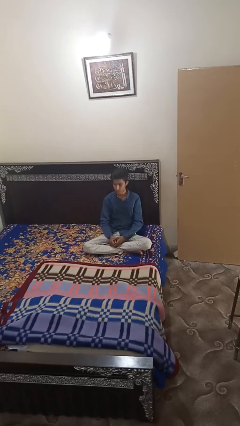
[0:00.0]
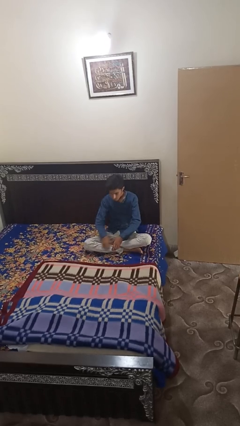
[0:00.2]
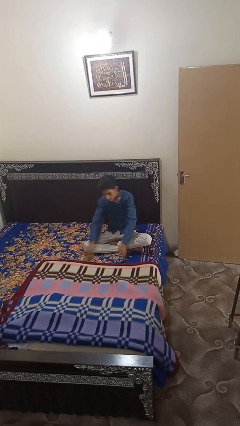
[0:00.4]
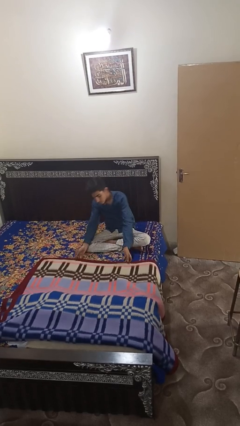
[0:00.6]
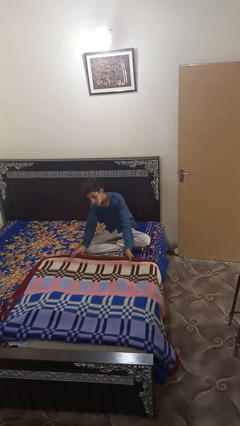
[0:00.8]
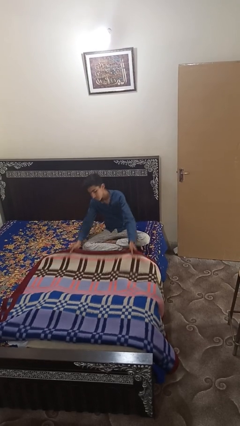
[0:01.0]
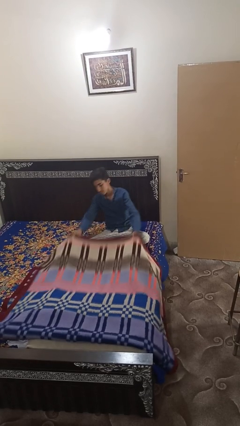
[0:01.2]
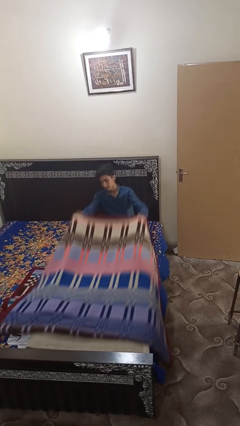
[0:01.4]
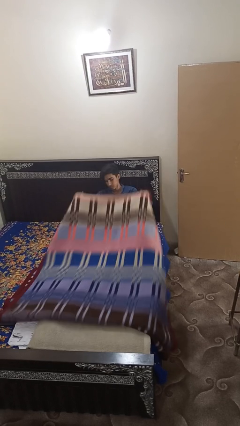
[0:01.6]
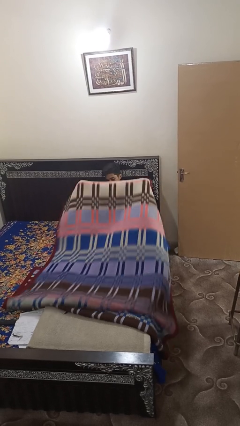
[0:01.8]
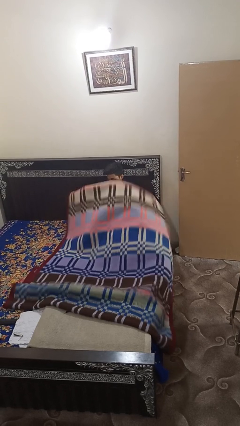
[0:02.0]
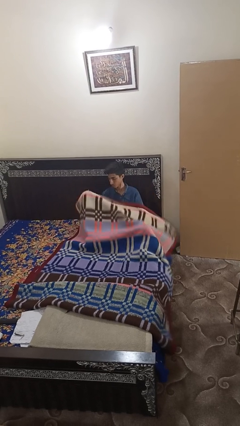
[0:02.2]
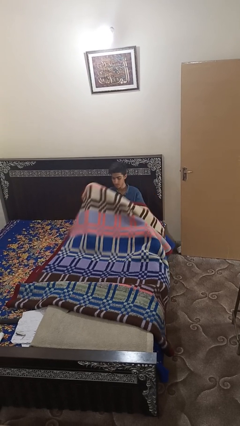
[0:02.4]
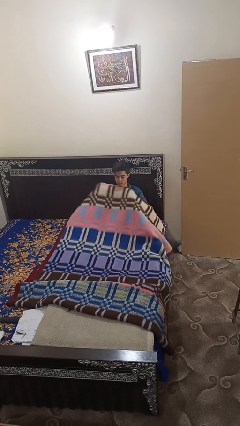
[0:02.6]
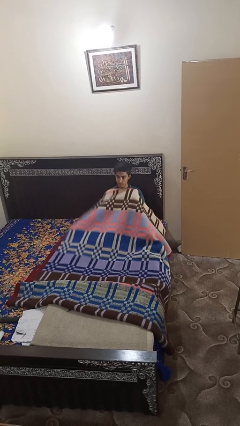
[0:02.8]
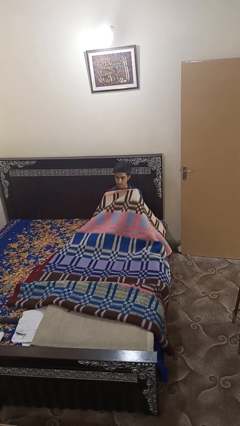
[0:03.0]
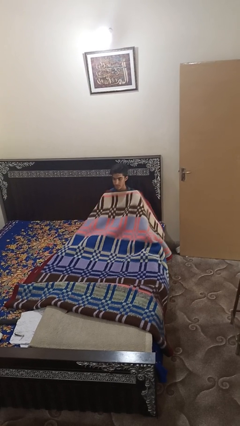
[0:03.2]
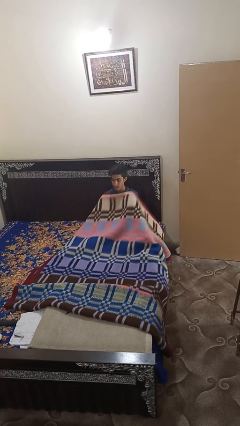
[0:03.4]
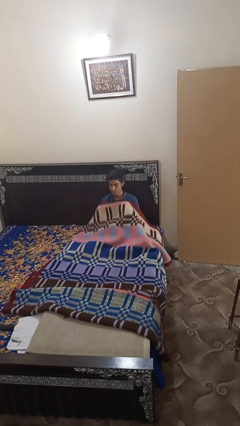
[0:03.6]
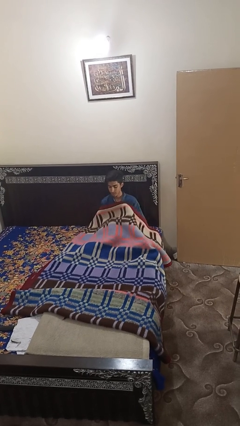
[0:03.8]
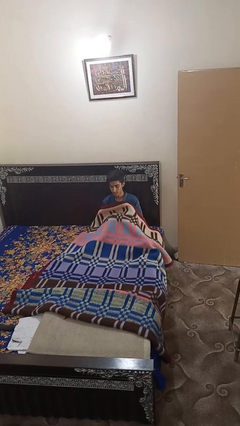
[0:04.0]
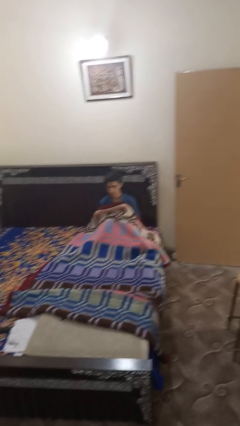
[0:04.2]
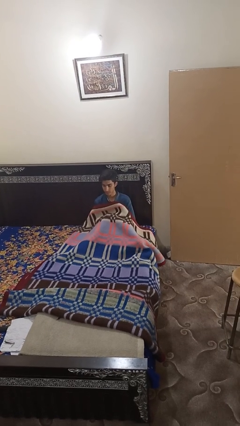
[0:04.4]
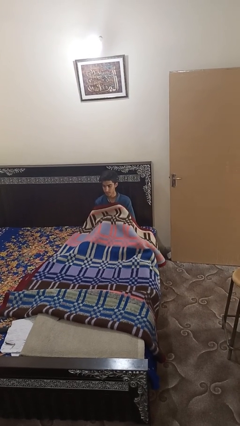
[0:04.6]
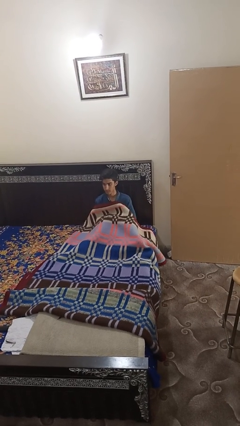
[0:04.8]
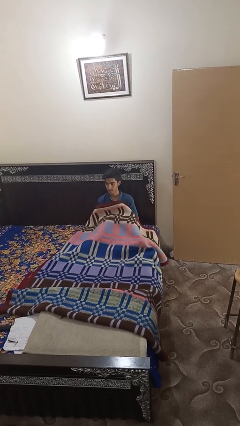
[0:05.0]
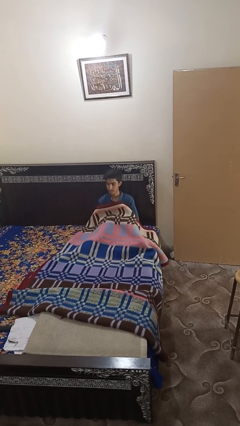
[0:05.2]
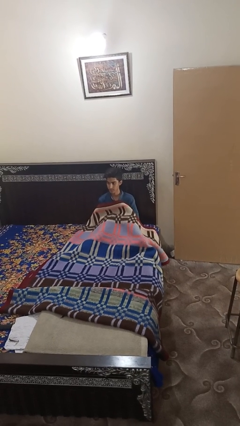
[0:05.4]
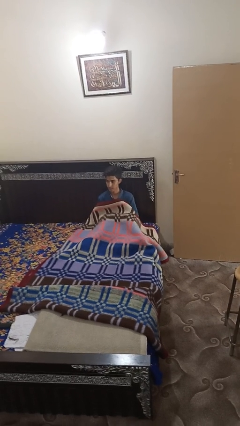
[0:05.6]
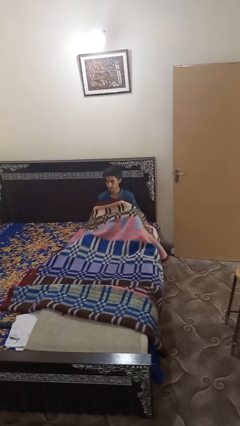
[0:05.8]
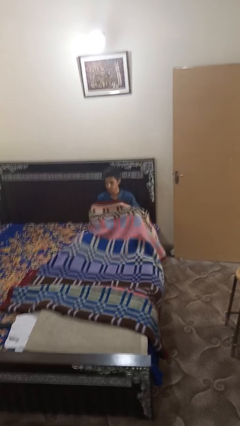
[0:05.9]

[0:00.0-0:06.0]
person covers with blanket

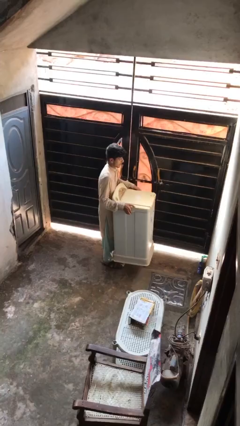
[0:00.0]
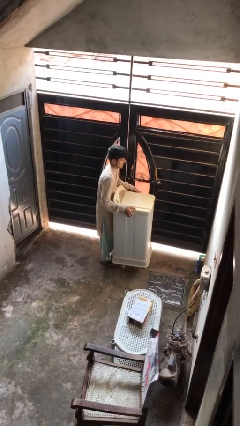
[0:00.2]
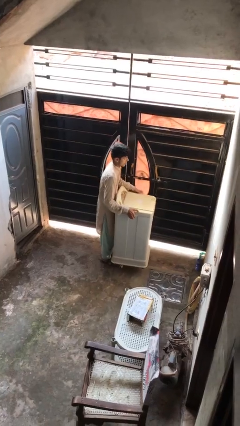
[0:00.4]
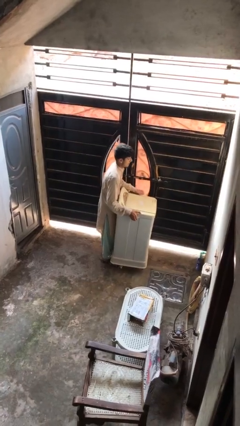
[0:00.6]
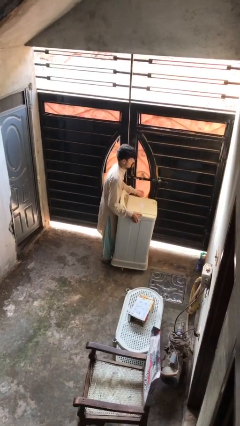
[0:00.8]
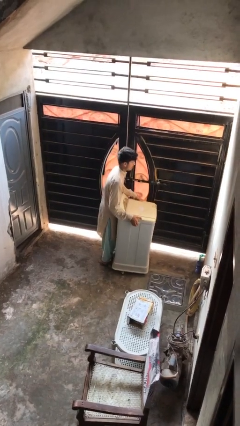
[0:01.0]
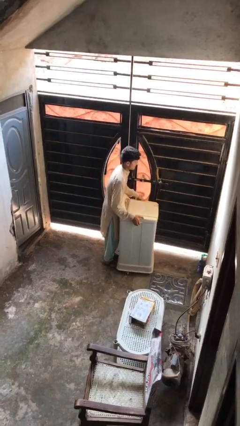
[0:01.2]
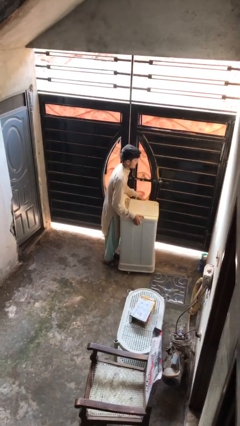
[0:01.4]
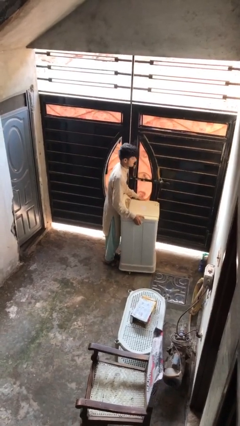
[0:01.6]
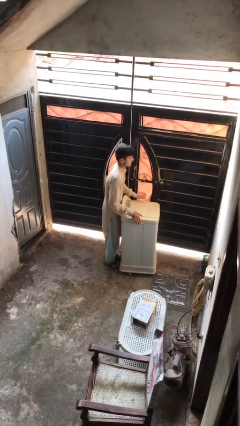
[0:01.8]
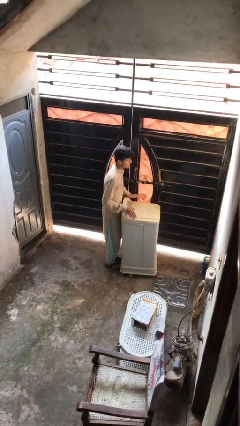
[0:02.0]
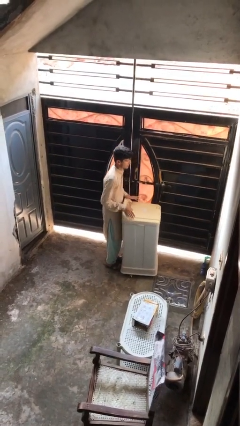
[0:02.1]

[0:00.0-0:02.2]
person puts down object on floor

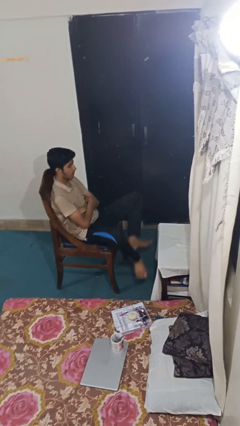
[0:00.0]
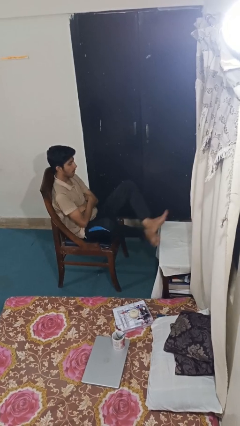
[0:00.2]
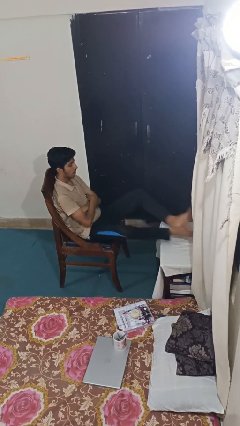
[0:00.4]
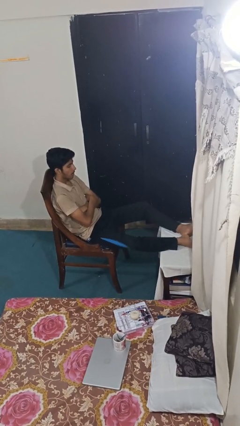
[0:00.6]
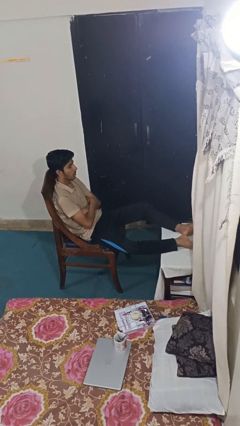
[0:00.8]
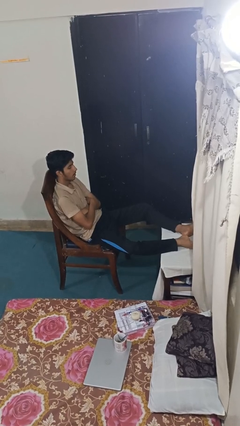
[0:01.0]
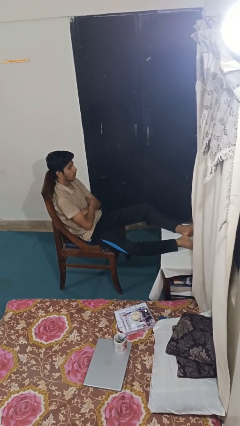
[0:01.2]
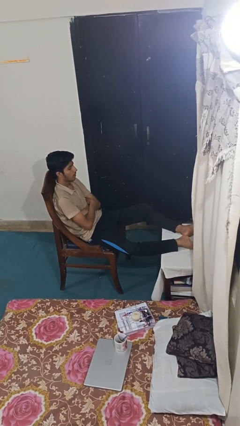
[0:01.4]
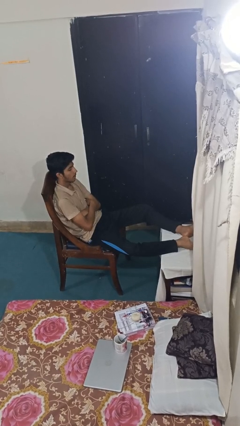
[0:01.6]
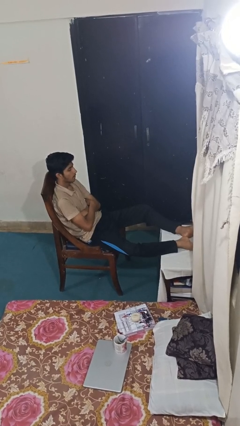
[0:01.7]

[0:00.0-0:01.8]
person puts feet up

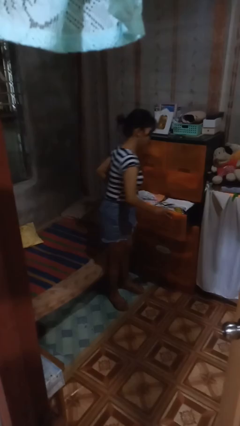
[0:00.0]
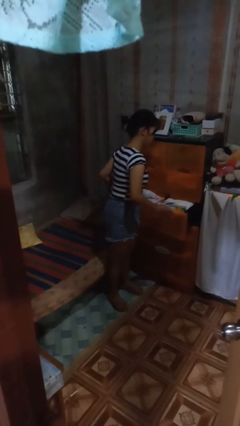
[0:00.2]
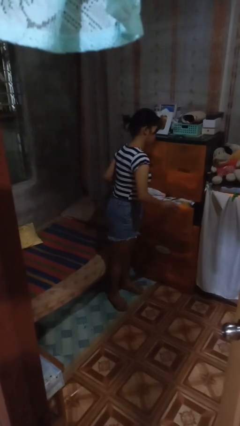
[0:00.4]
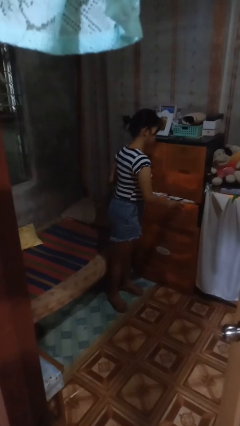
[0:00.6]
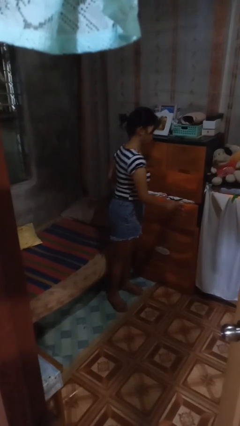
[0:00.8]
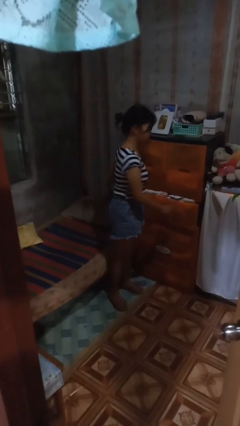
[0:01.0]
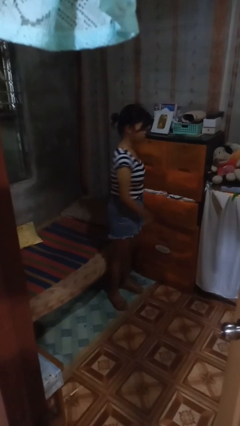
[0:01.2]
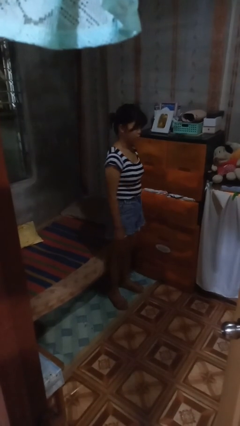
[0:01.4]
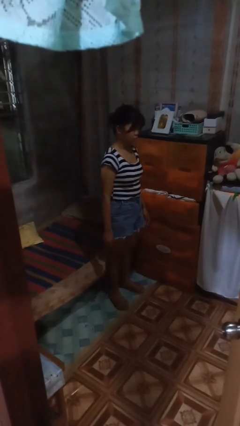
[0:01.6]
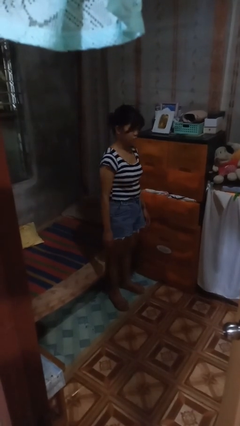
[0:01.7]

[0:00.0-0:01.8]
person closes dresser drawer

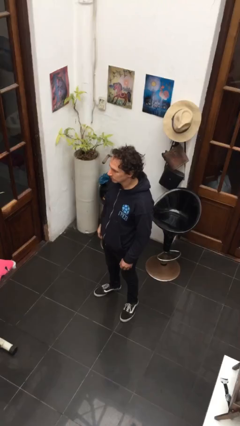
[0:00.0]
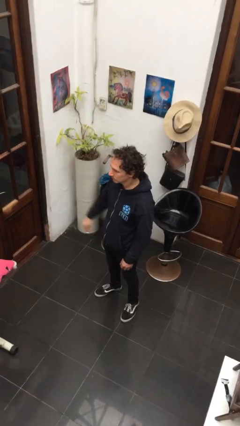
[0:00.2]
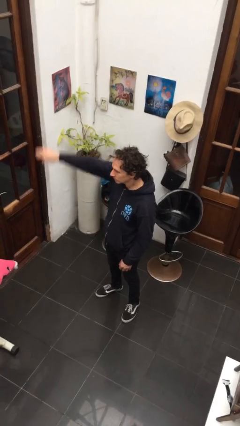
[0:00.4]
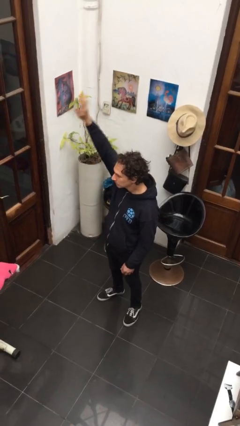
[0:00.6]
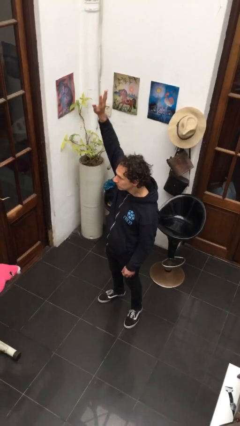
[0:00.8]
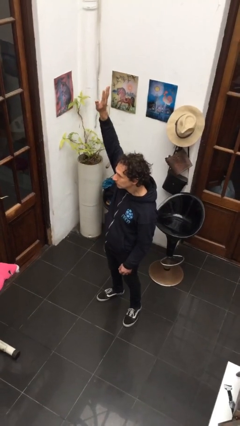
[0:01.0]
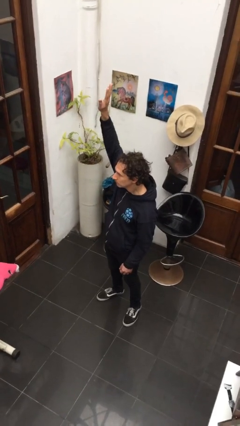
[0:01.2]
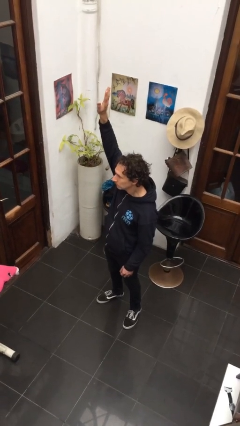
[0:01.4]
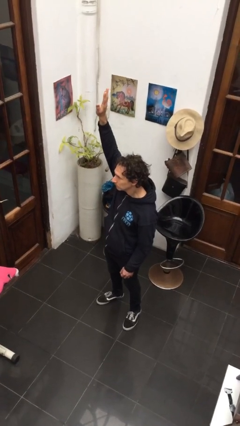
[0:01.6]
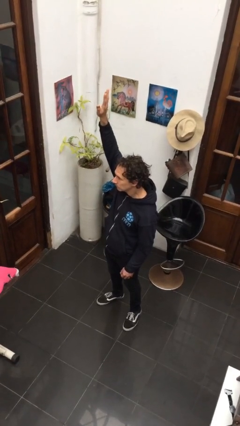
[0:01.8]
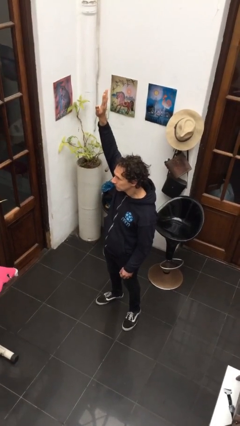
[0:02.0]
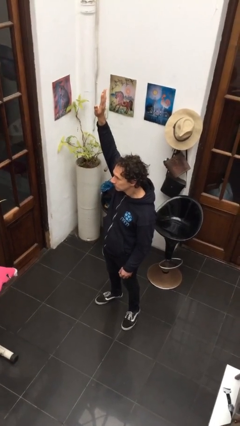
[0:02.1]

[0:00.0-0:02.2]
person gestures raise hand

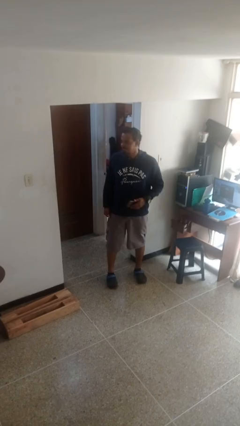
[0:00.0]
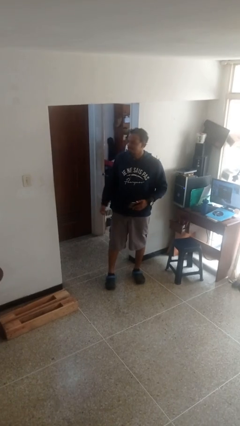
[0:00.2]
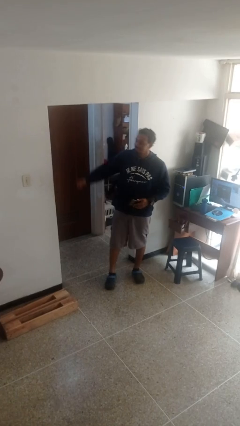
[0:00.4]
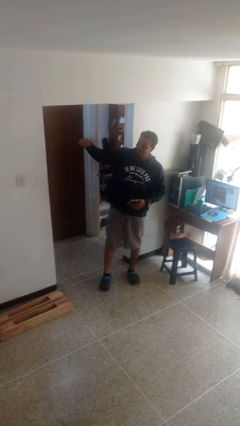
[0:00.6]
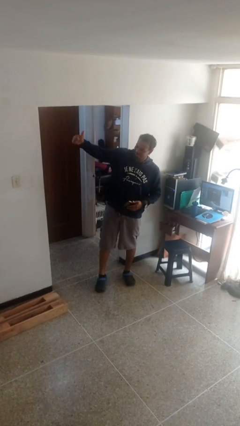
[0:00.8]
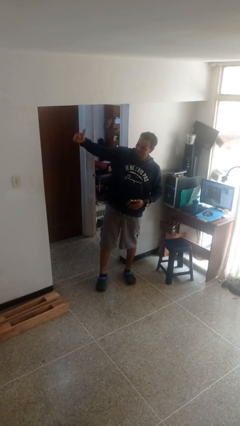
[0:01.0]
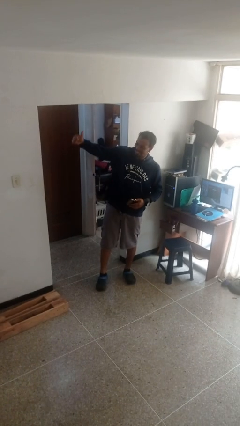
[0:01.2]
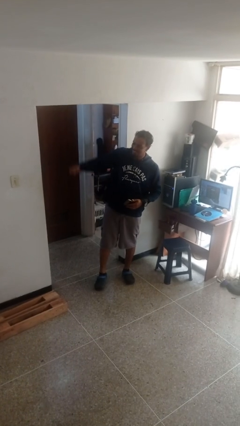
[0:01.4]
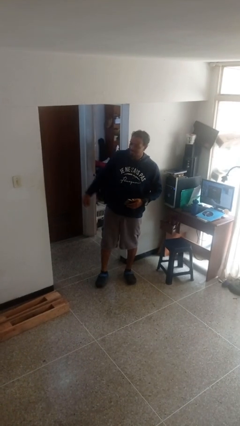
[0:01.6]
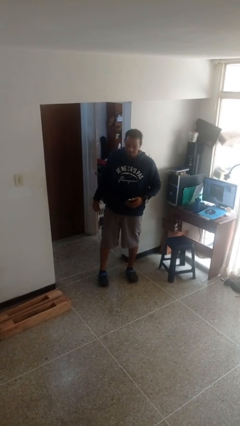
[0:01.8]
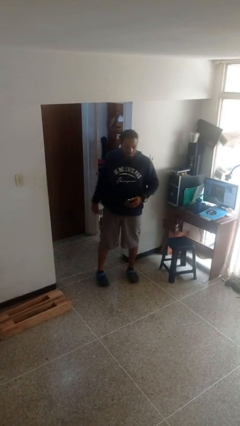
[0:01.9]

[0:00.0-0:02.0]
person gestures thumbs up

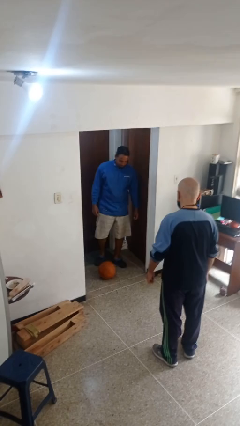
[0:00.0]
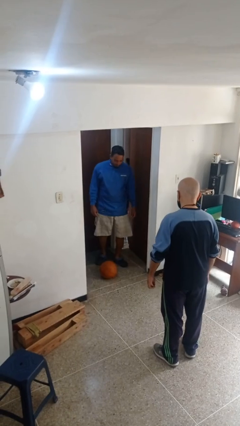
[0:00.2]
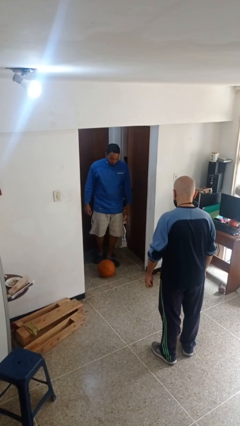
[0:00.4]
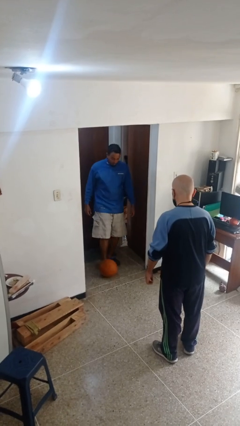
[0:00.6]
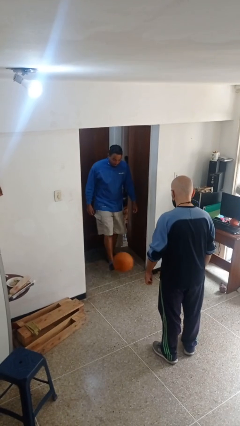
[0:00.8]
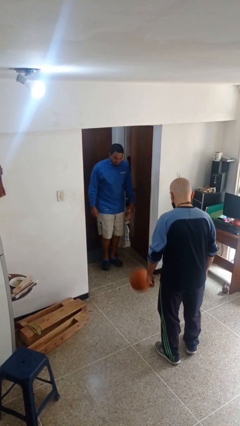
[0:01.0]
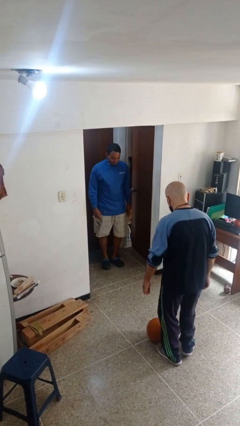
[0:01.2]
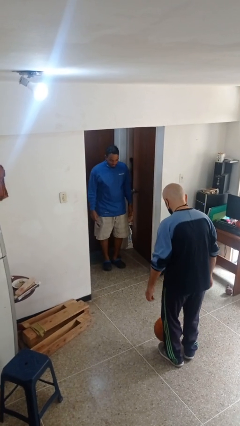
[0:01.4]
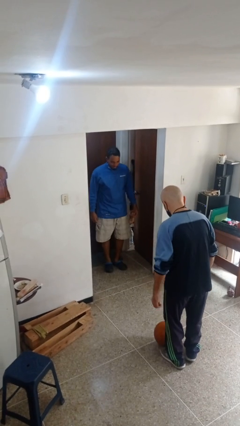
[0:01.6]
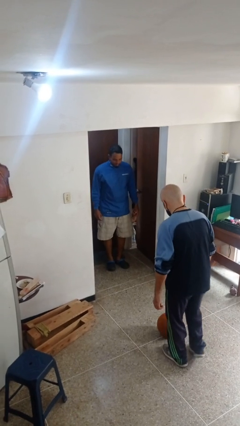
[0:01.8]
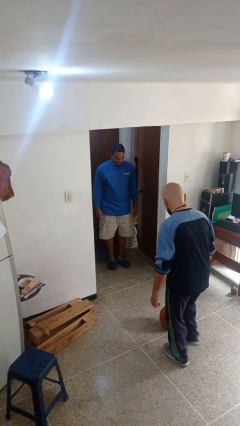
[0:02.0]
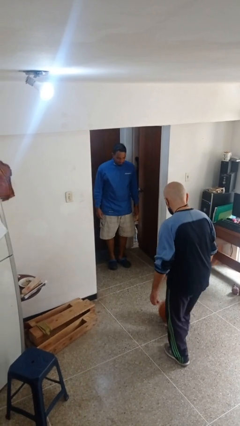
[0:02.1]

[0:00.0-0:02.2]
person kicks object to person
